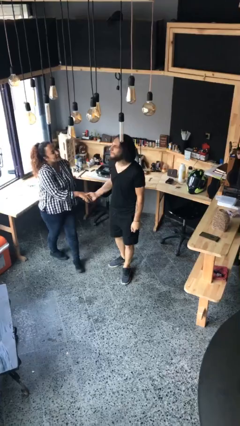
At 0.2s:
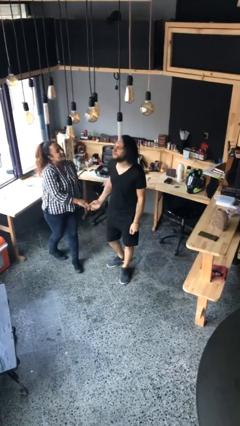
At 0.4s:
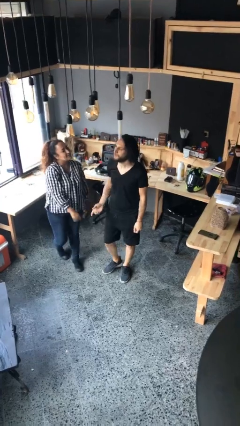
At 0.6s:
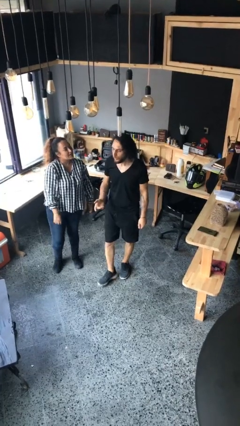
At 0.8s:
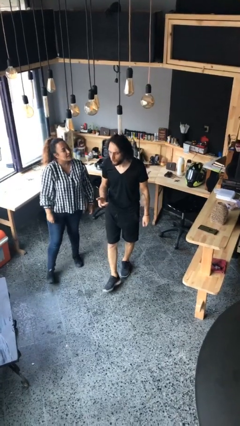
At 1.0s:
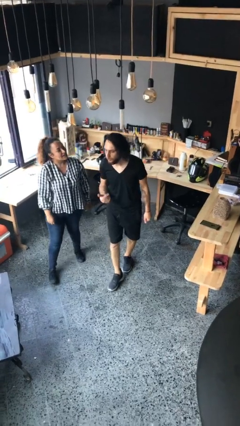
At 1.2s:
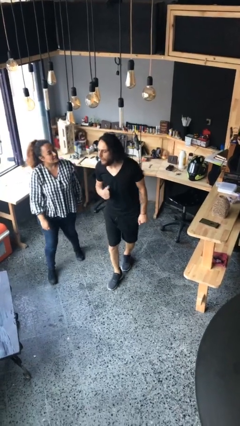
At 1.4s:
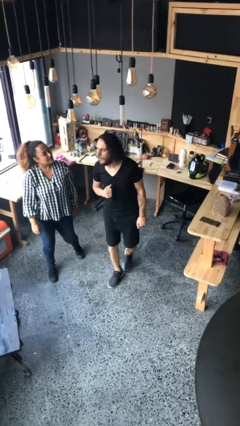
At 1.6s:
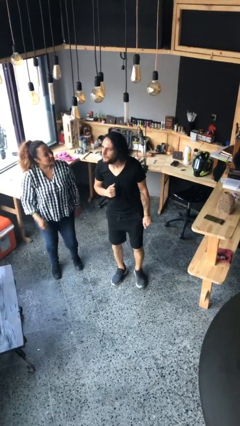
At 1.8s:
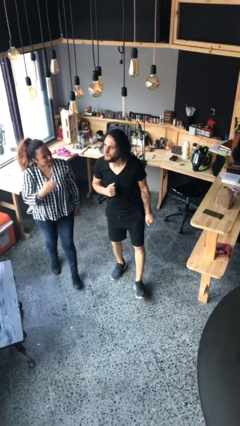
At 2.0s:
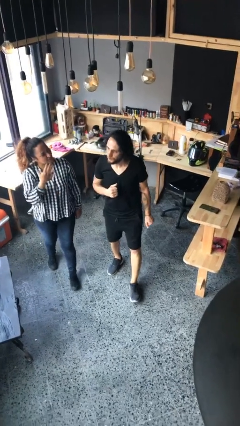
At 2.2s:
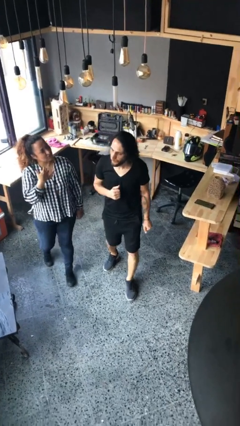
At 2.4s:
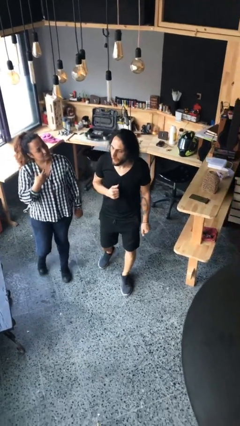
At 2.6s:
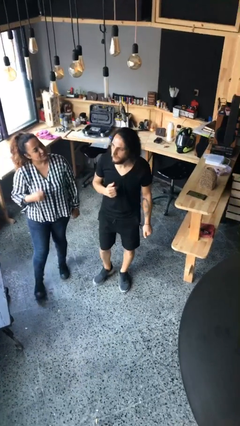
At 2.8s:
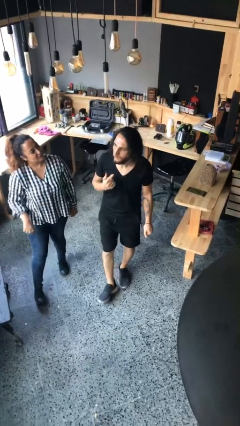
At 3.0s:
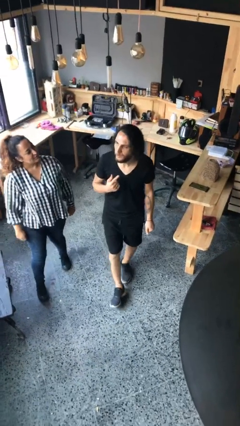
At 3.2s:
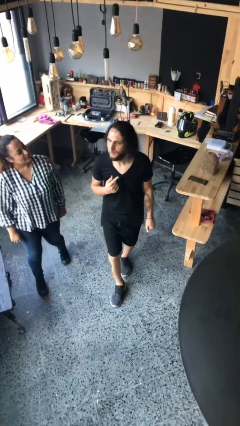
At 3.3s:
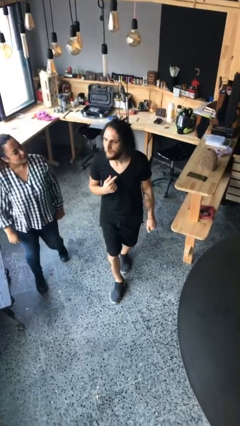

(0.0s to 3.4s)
person talks to person

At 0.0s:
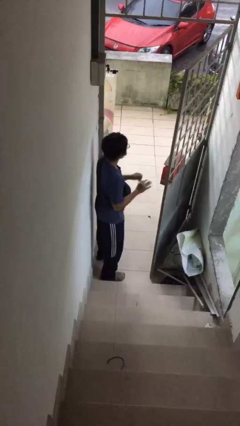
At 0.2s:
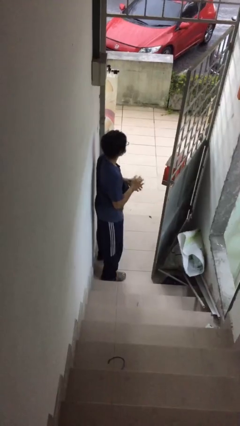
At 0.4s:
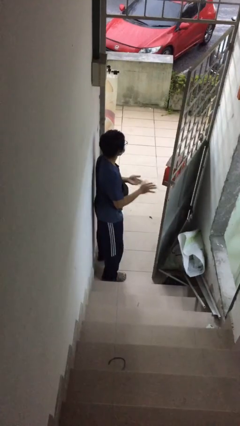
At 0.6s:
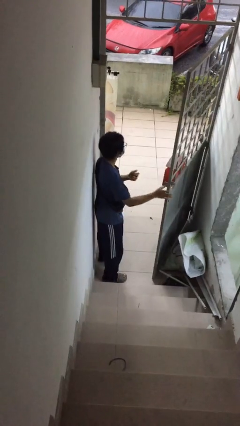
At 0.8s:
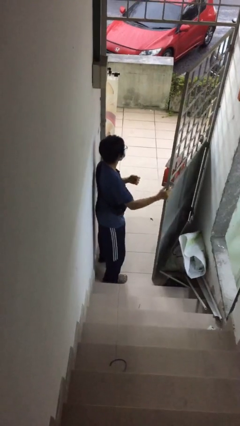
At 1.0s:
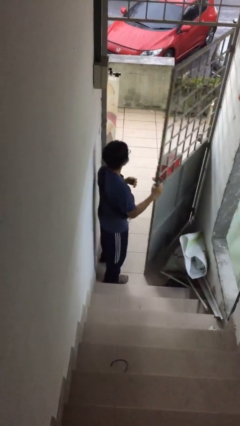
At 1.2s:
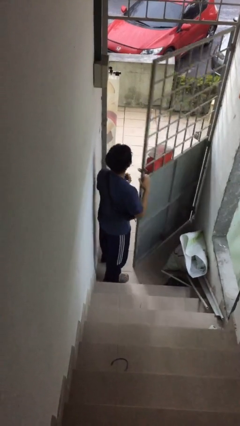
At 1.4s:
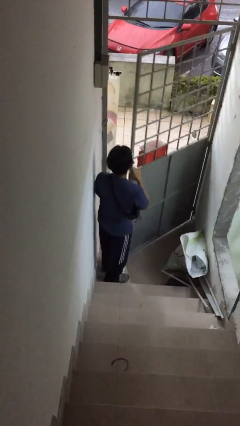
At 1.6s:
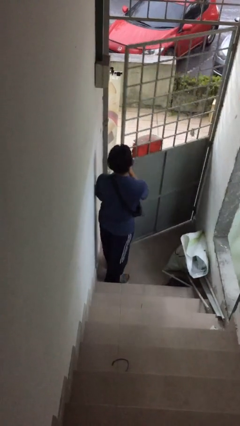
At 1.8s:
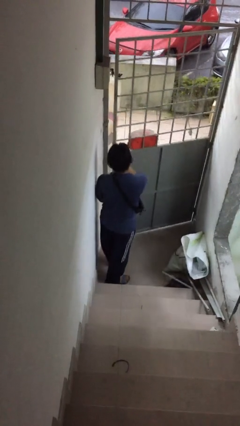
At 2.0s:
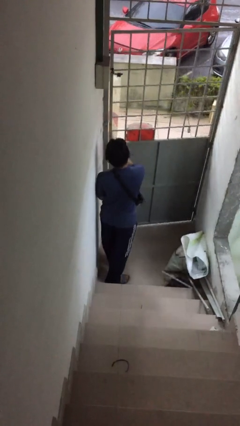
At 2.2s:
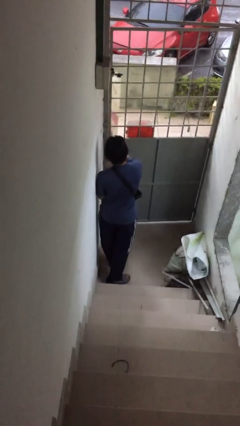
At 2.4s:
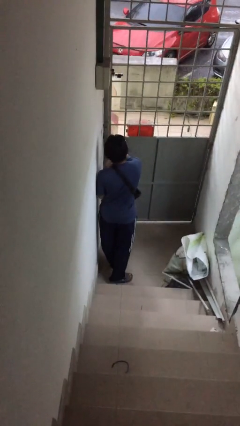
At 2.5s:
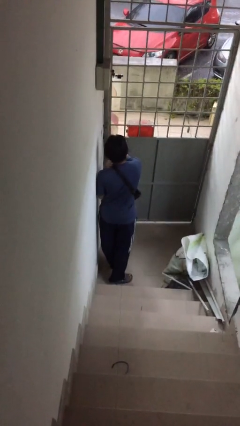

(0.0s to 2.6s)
person closes facility door

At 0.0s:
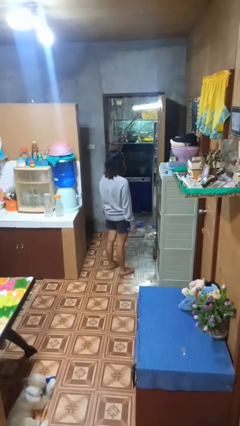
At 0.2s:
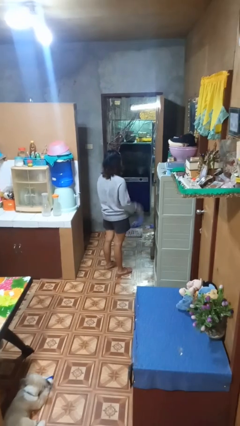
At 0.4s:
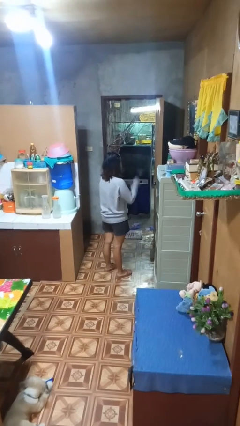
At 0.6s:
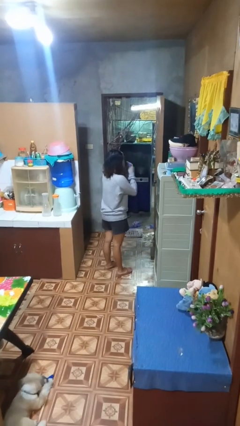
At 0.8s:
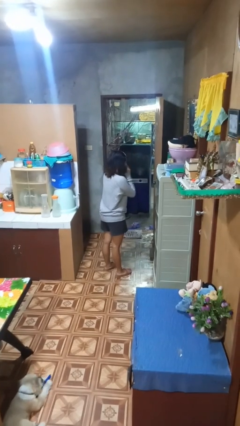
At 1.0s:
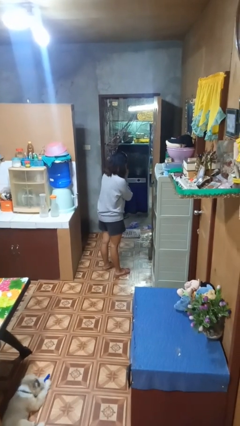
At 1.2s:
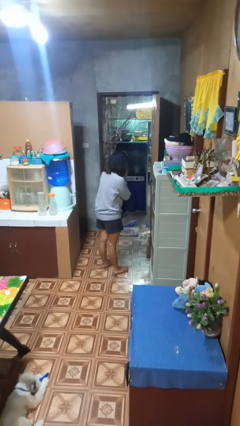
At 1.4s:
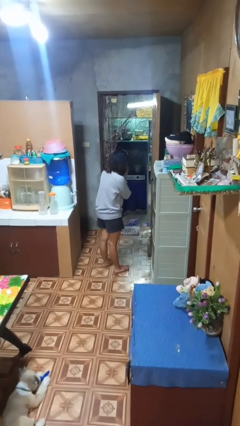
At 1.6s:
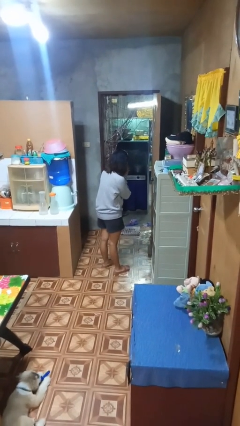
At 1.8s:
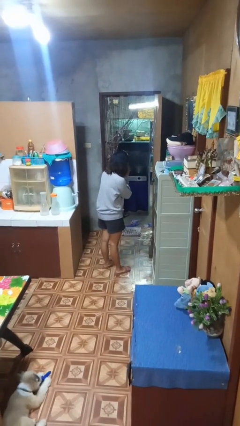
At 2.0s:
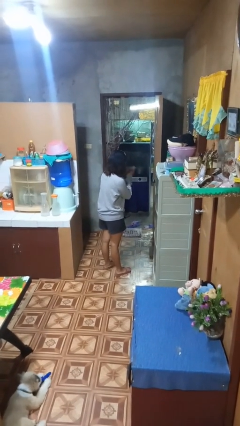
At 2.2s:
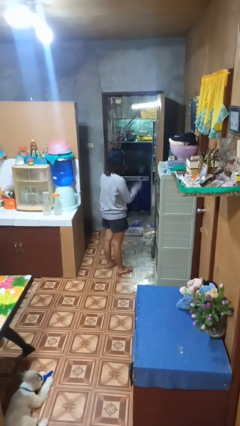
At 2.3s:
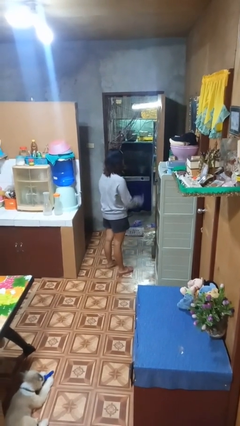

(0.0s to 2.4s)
person blows nose

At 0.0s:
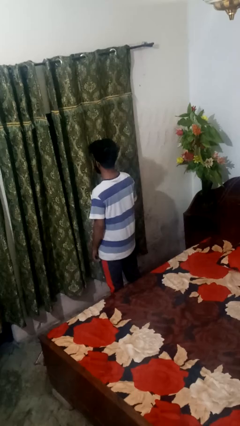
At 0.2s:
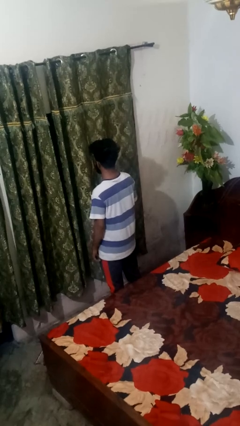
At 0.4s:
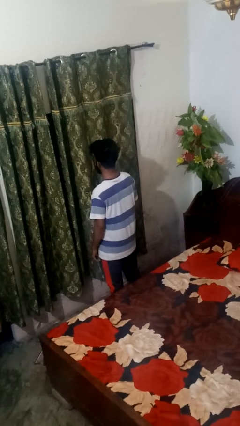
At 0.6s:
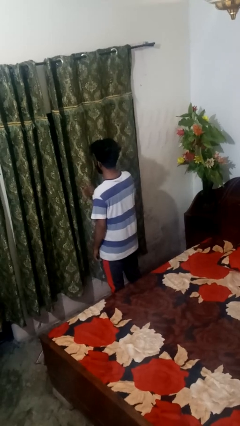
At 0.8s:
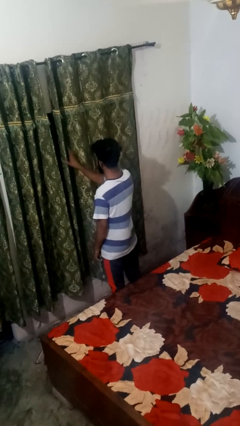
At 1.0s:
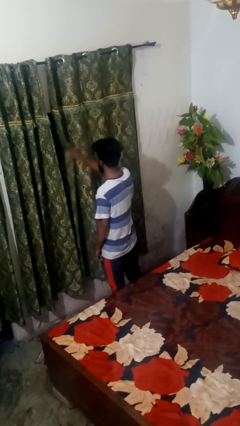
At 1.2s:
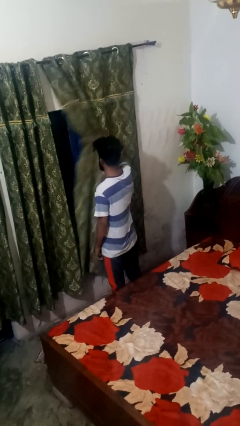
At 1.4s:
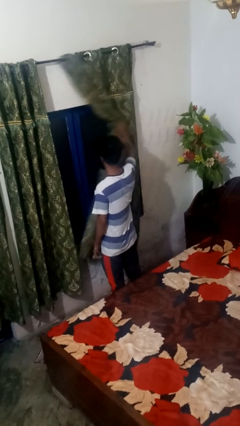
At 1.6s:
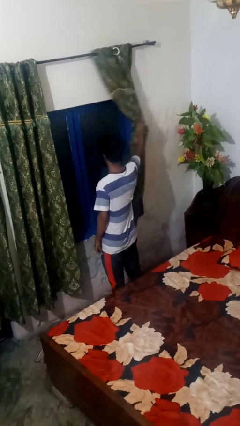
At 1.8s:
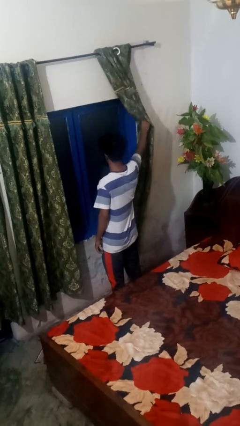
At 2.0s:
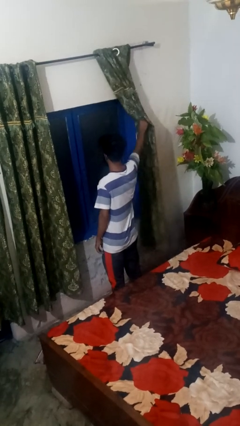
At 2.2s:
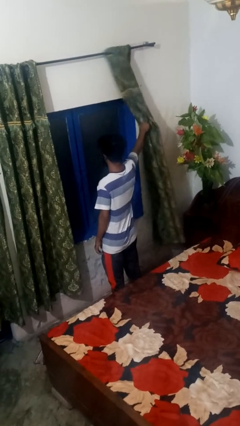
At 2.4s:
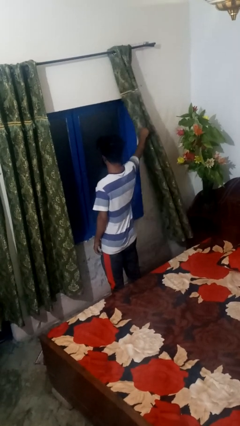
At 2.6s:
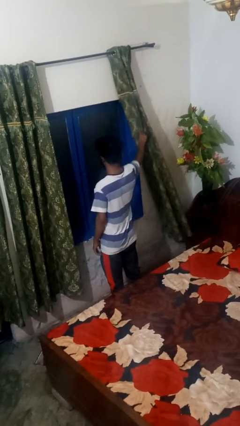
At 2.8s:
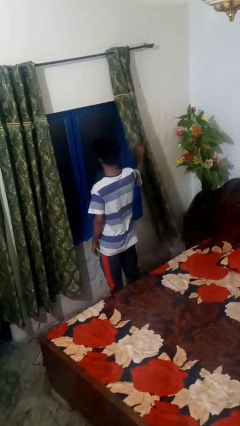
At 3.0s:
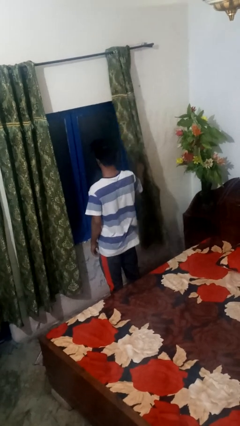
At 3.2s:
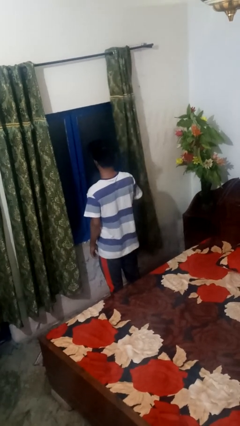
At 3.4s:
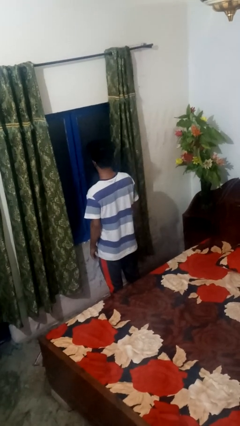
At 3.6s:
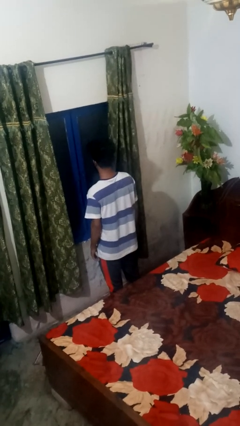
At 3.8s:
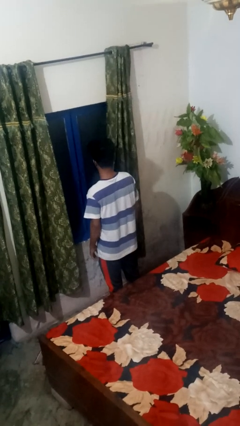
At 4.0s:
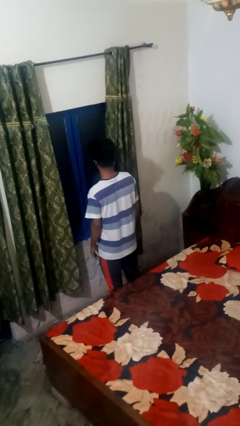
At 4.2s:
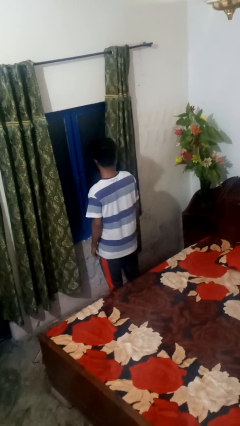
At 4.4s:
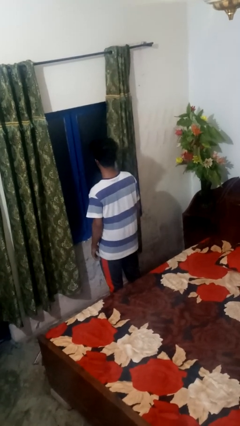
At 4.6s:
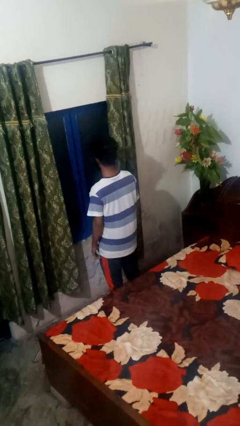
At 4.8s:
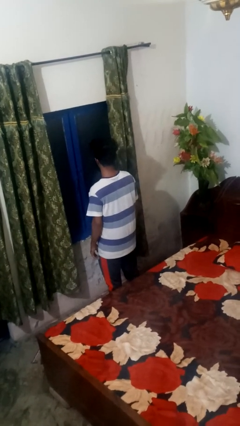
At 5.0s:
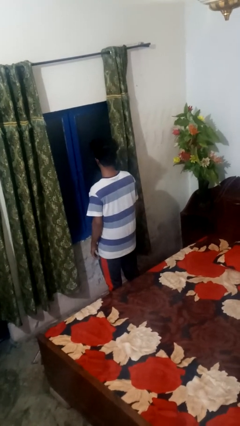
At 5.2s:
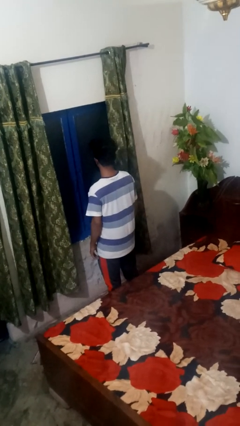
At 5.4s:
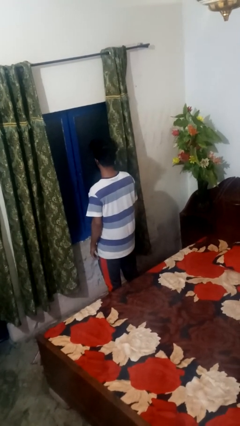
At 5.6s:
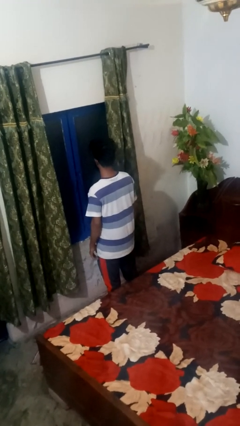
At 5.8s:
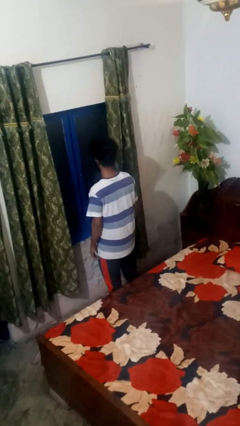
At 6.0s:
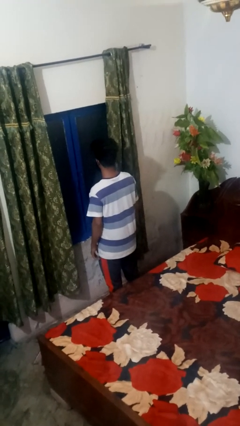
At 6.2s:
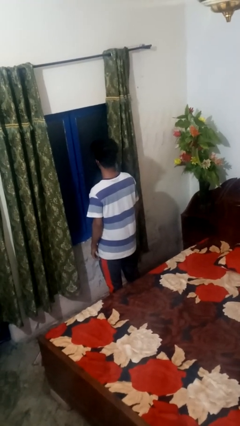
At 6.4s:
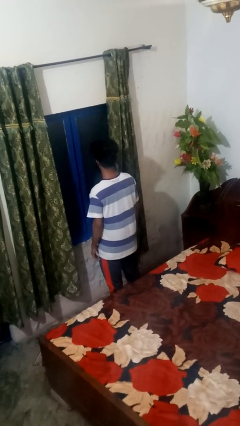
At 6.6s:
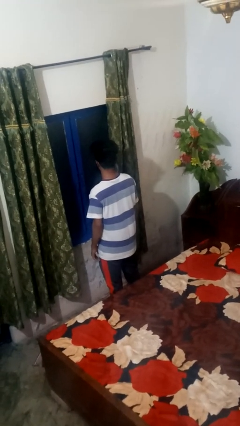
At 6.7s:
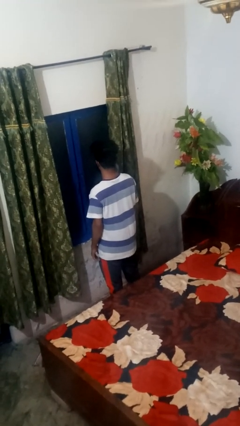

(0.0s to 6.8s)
person opens curtains

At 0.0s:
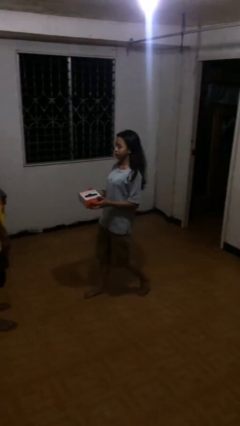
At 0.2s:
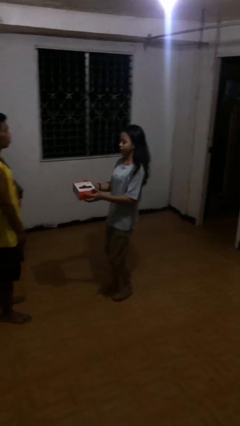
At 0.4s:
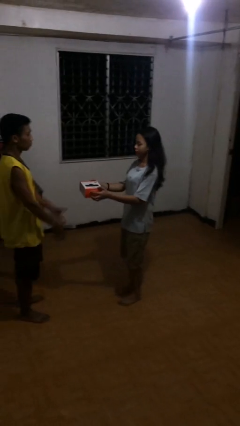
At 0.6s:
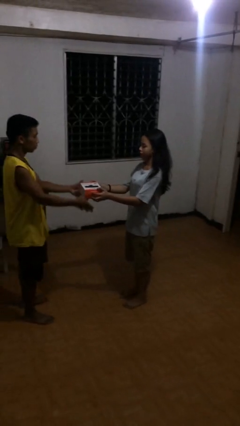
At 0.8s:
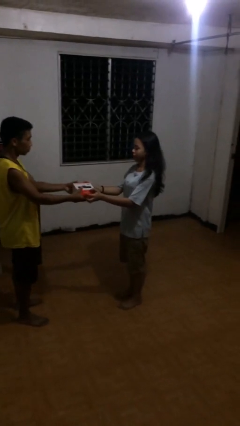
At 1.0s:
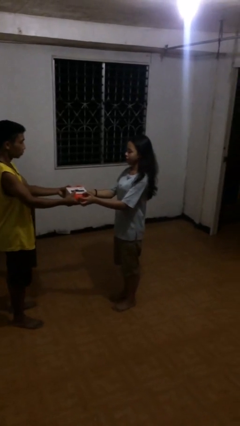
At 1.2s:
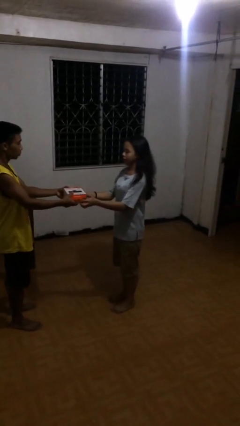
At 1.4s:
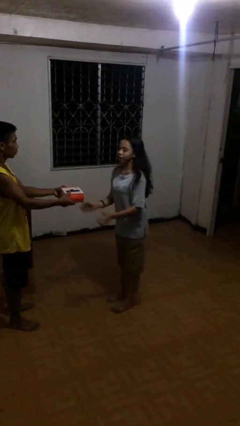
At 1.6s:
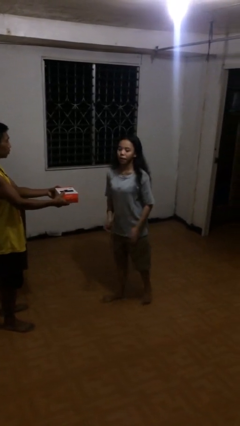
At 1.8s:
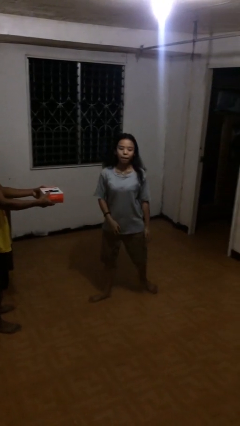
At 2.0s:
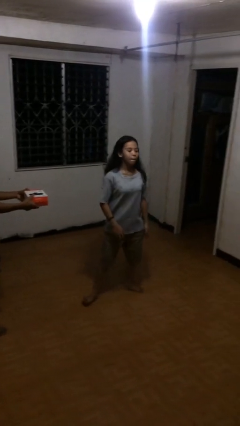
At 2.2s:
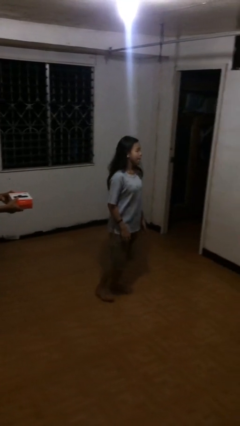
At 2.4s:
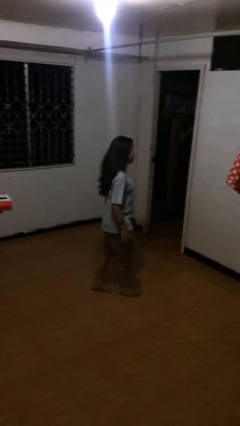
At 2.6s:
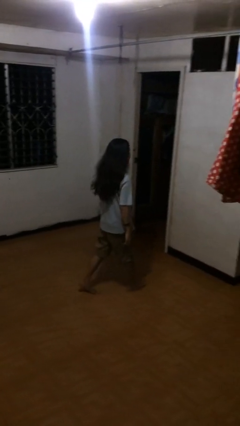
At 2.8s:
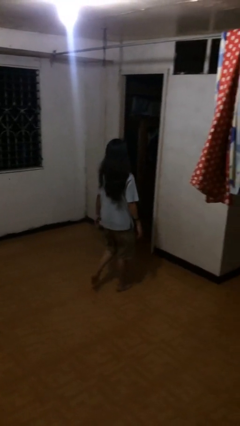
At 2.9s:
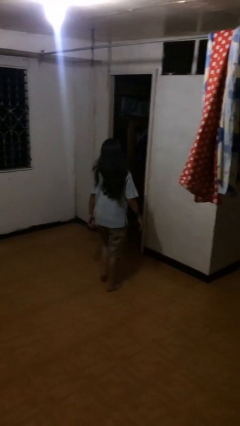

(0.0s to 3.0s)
person transfers object to person
